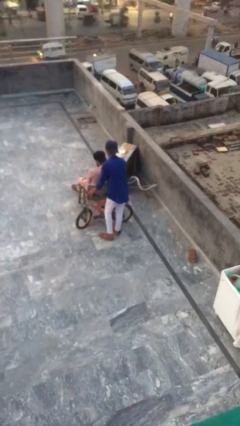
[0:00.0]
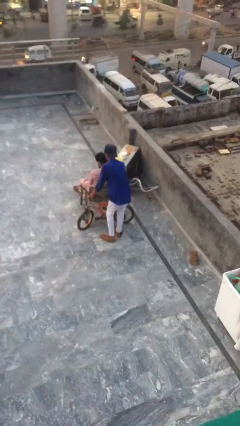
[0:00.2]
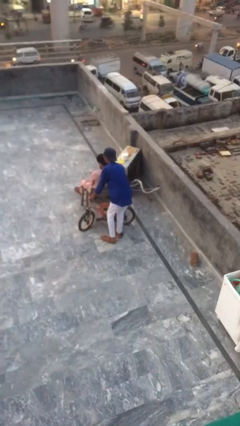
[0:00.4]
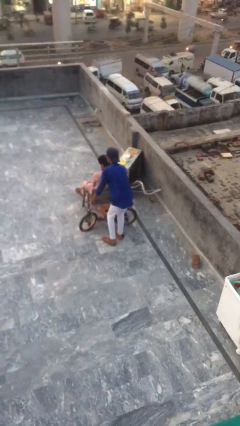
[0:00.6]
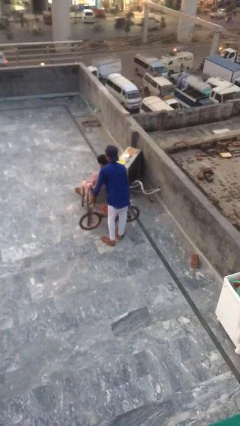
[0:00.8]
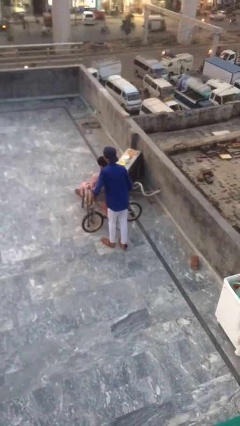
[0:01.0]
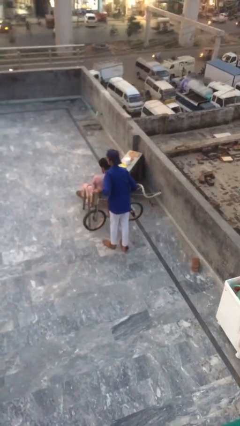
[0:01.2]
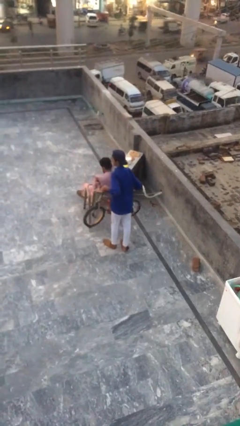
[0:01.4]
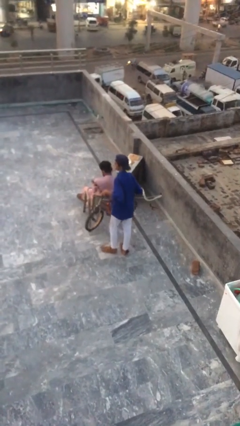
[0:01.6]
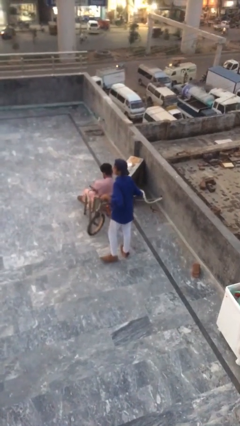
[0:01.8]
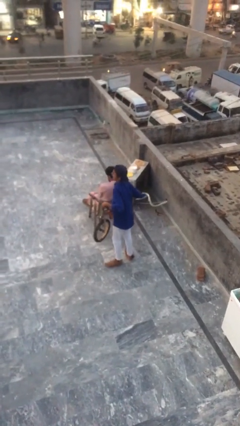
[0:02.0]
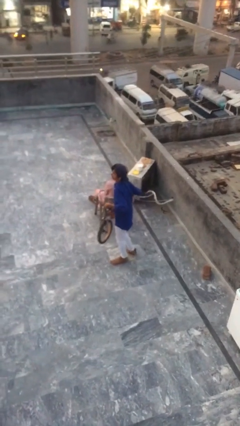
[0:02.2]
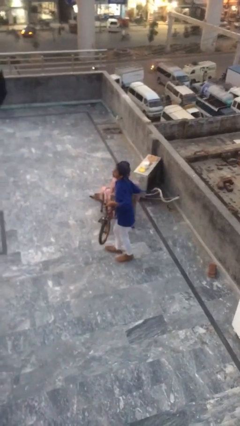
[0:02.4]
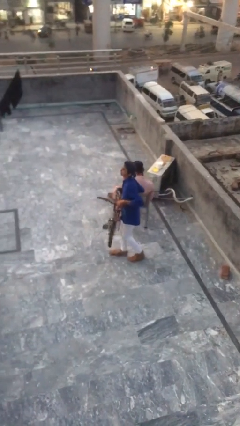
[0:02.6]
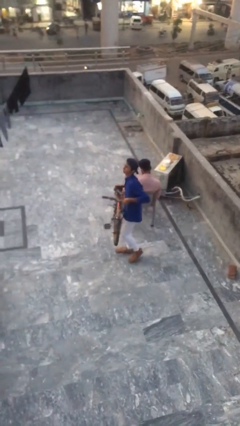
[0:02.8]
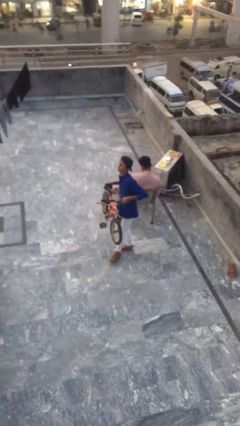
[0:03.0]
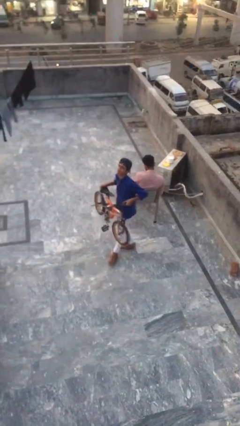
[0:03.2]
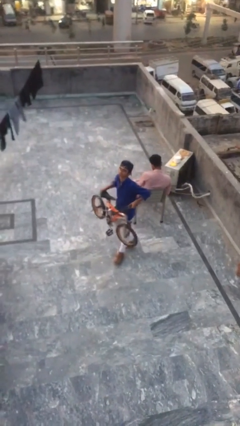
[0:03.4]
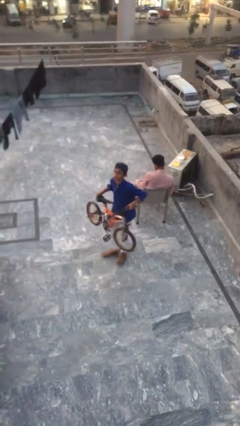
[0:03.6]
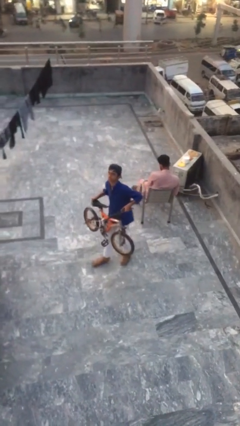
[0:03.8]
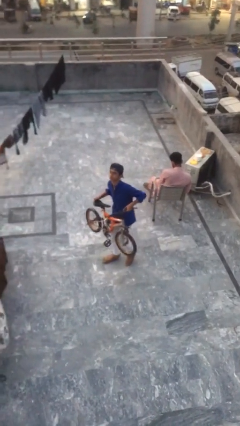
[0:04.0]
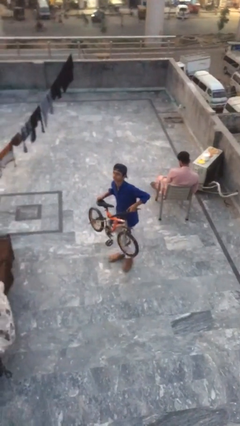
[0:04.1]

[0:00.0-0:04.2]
person steals object from person

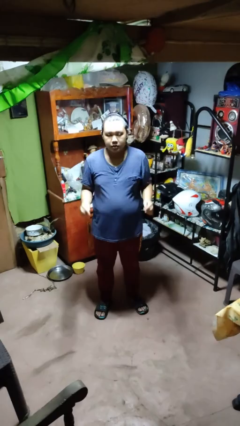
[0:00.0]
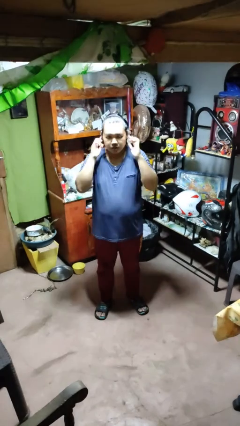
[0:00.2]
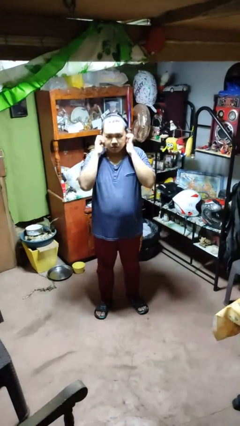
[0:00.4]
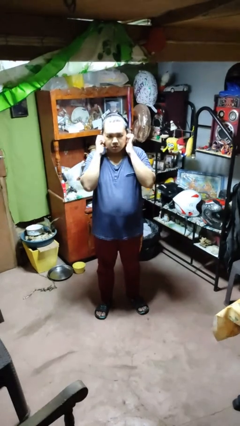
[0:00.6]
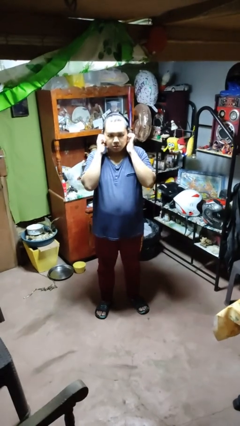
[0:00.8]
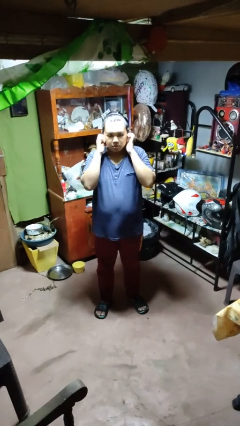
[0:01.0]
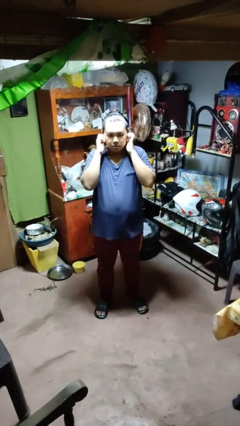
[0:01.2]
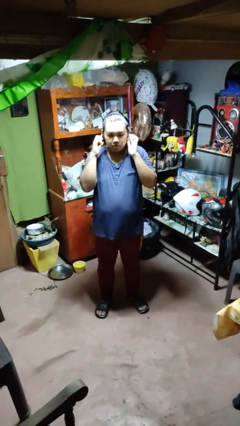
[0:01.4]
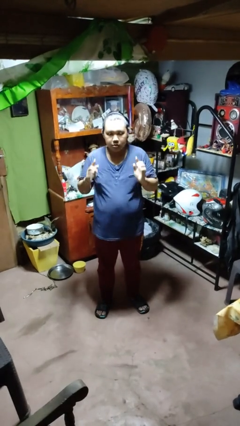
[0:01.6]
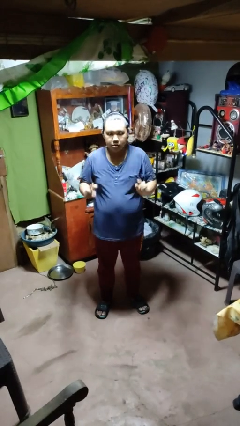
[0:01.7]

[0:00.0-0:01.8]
person puts fingers in ear

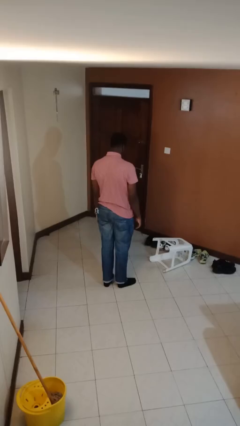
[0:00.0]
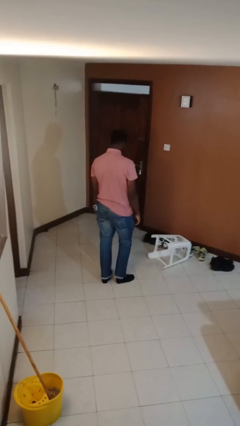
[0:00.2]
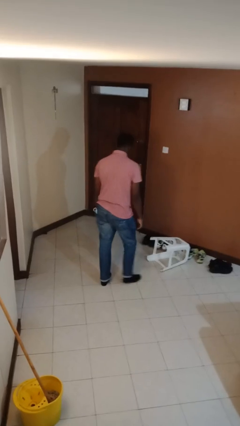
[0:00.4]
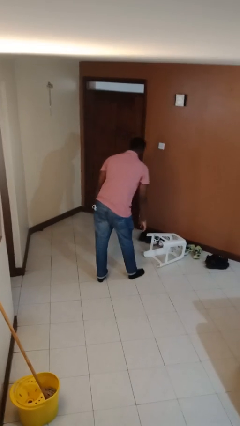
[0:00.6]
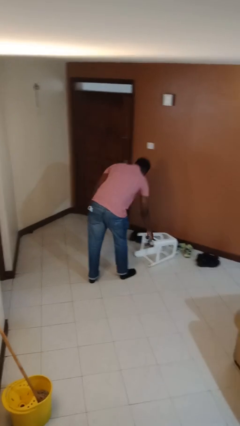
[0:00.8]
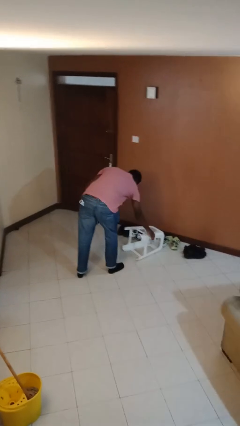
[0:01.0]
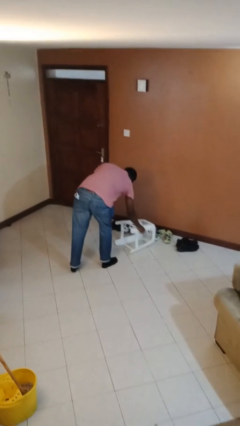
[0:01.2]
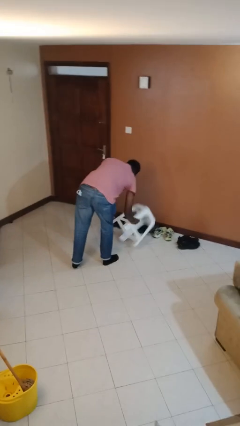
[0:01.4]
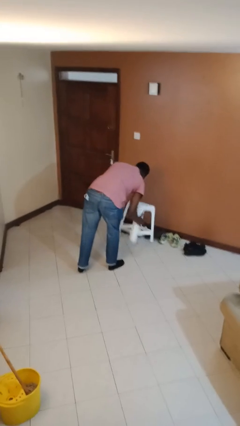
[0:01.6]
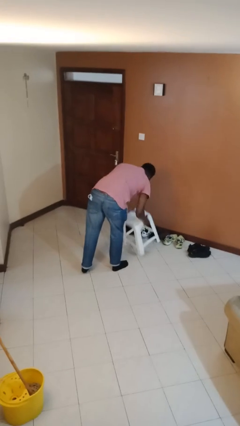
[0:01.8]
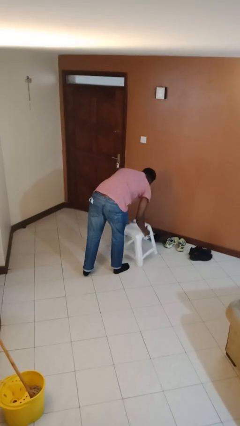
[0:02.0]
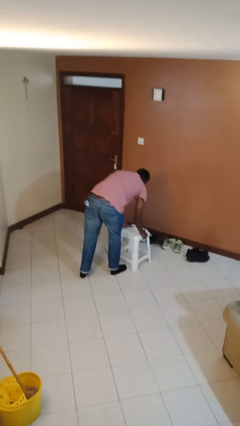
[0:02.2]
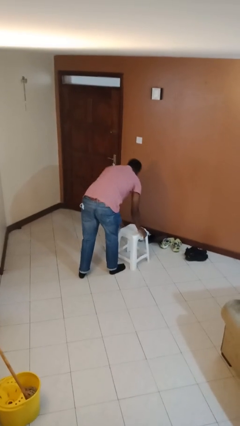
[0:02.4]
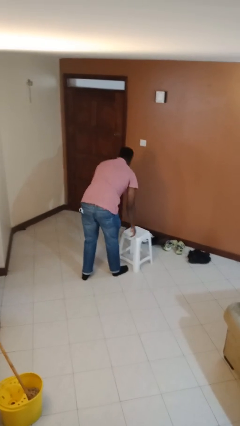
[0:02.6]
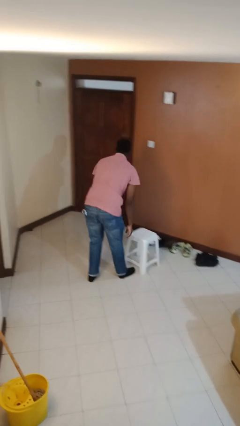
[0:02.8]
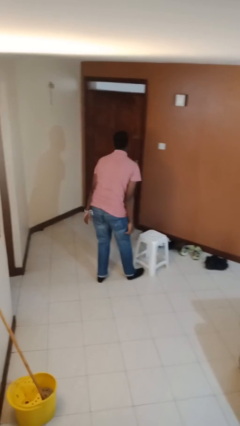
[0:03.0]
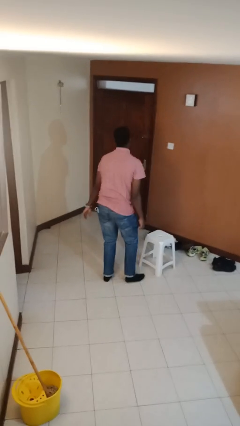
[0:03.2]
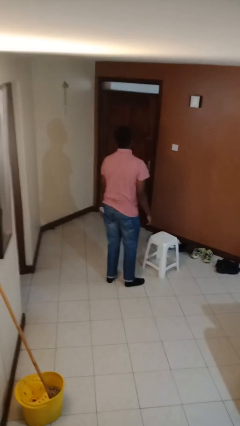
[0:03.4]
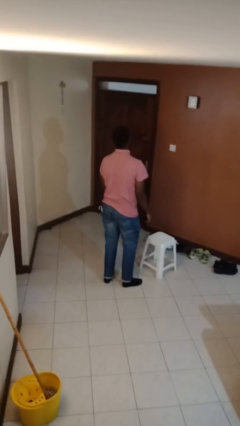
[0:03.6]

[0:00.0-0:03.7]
person sets upright furniture
